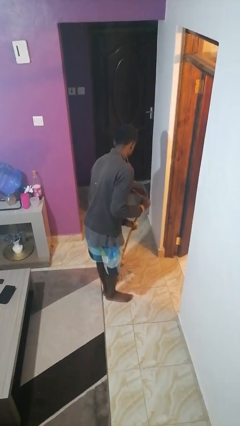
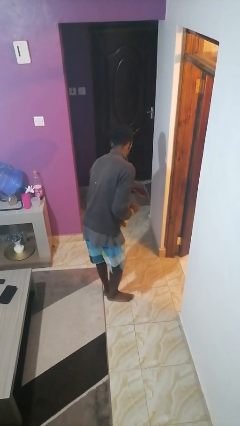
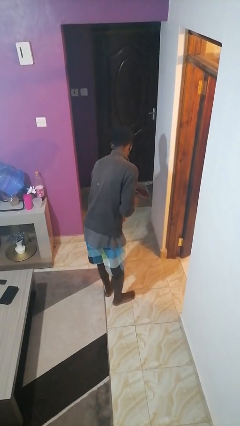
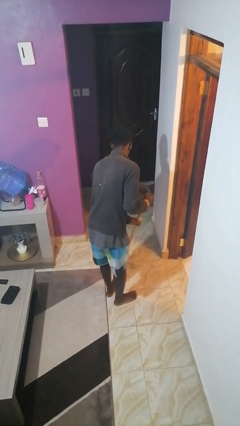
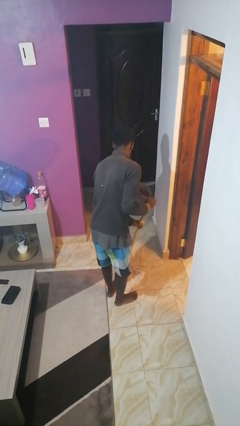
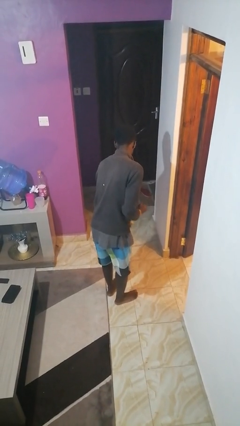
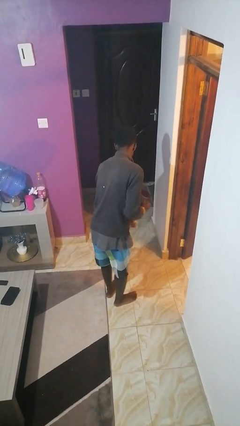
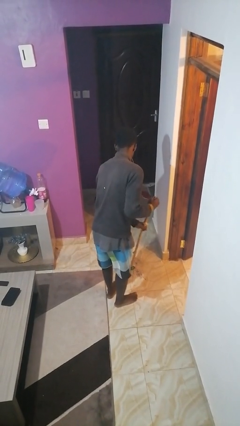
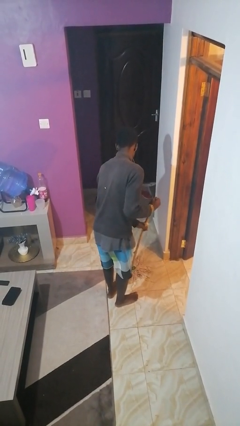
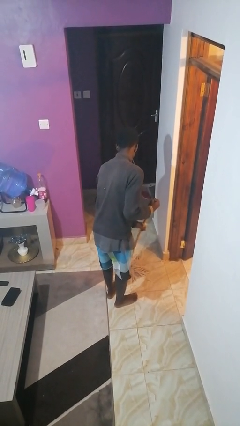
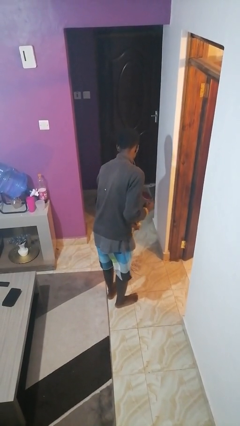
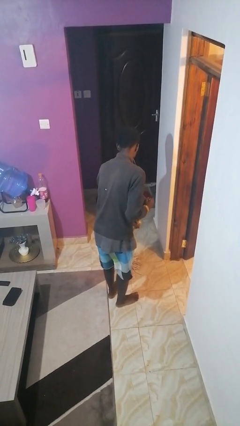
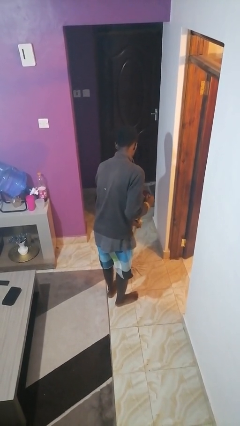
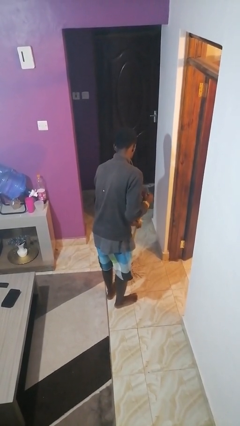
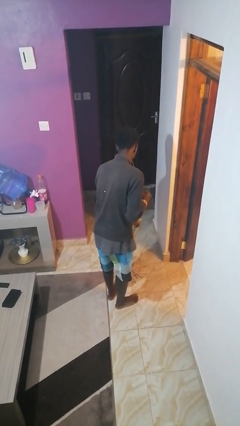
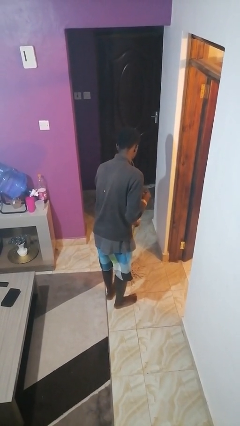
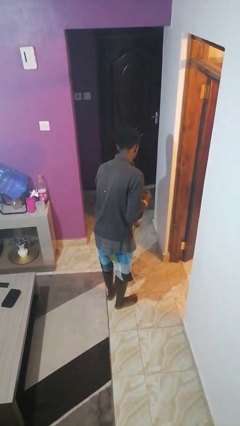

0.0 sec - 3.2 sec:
person mops

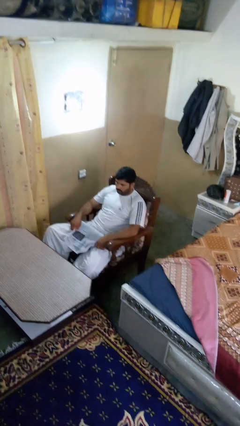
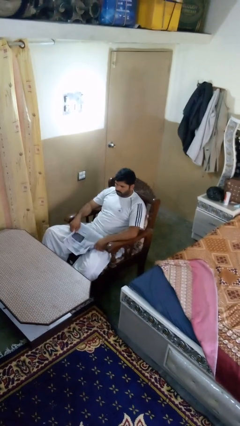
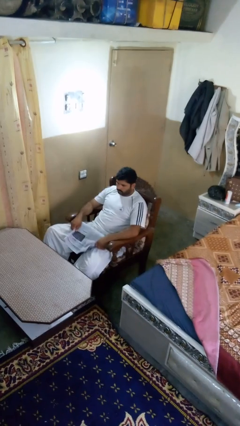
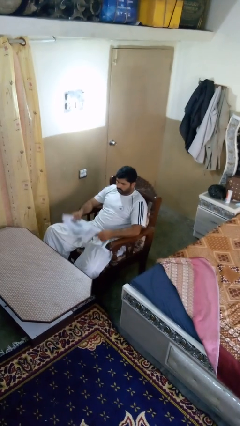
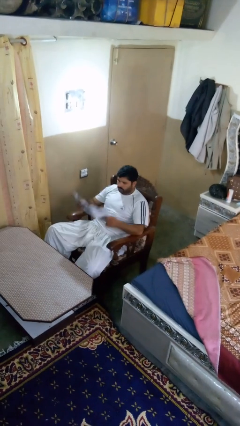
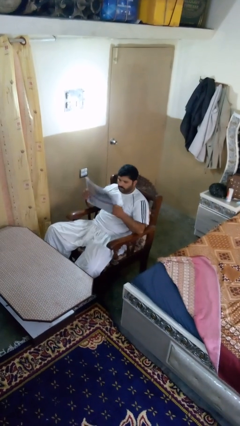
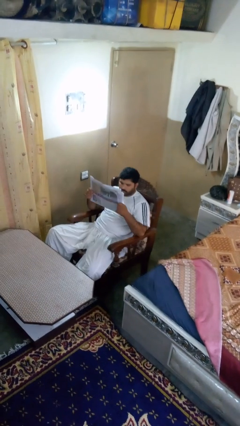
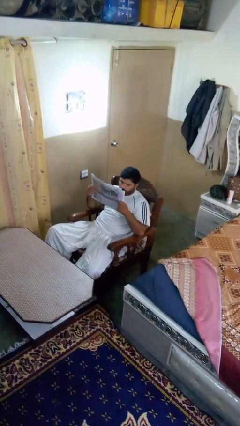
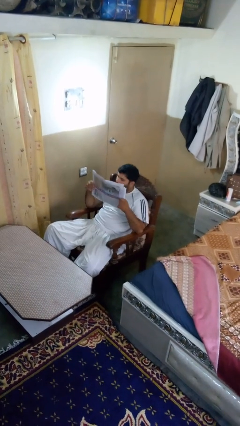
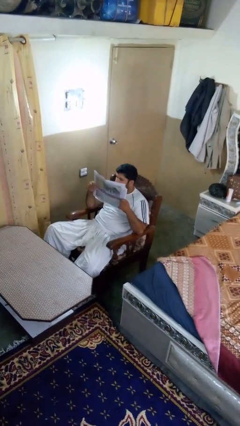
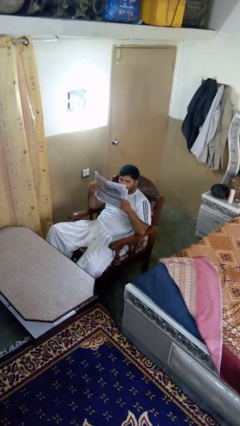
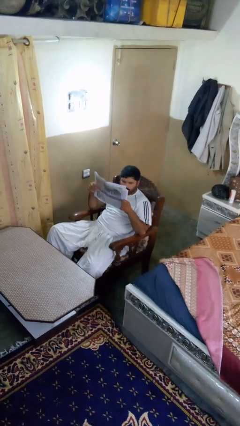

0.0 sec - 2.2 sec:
person reads newspaper

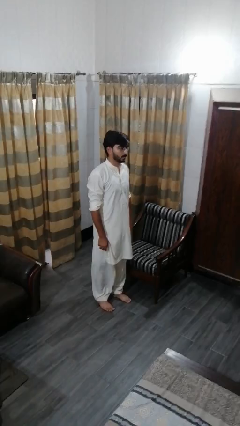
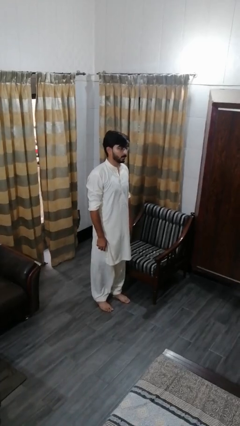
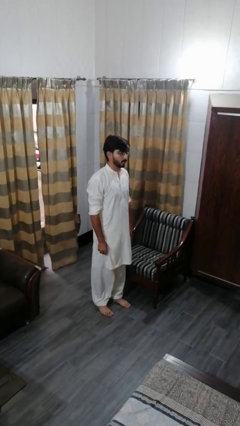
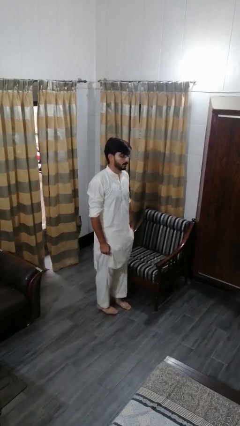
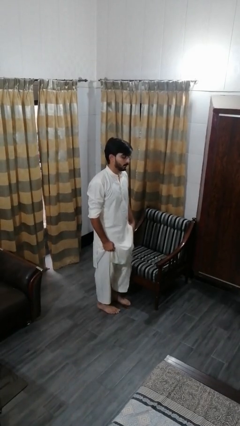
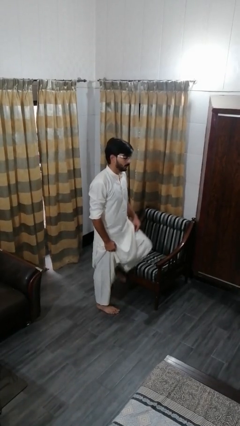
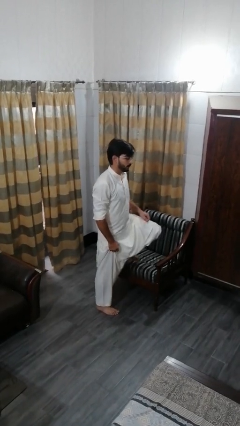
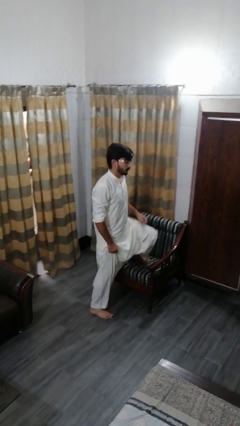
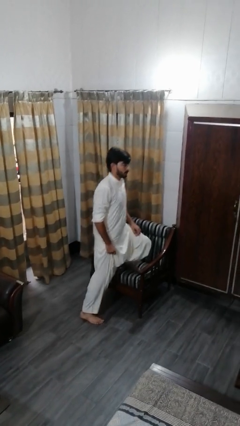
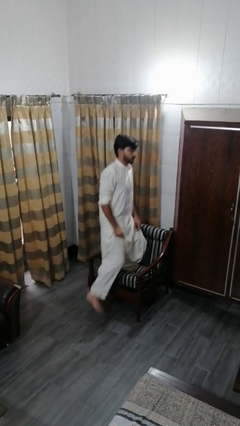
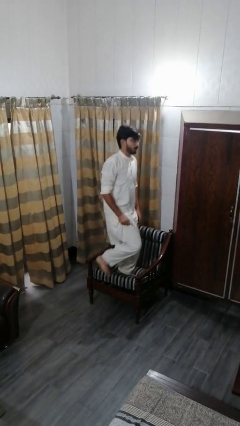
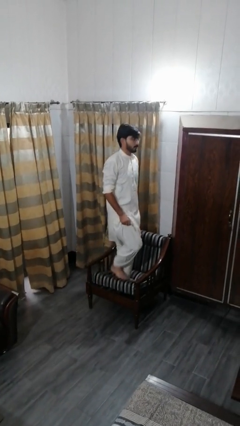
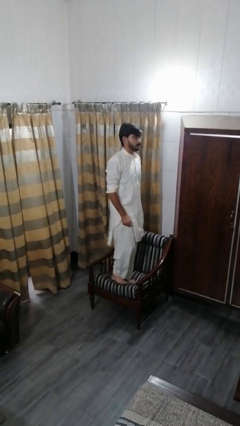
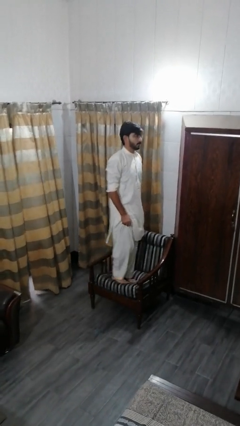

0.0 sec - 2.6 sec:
person climbs on chair

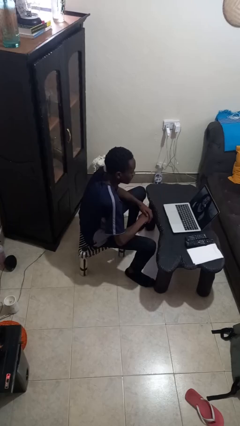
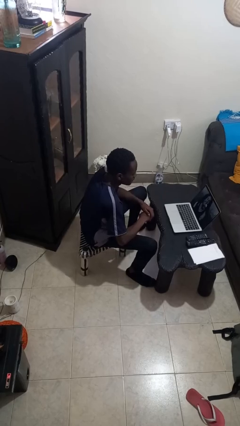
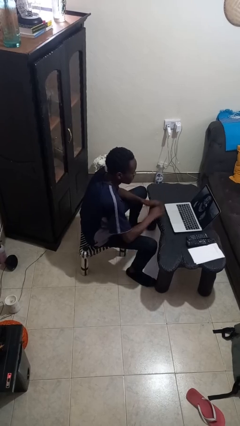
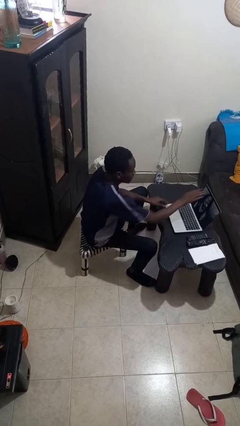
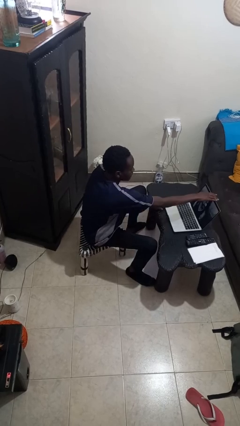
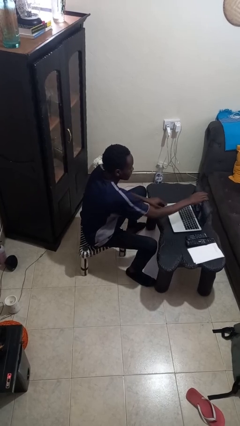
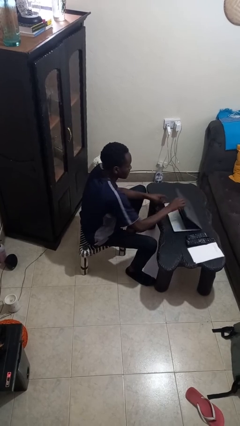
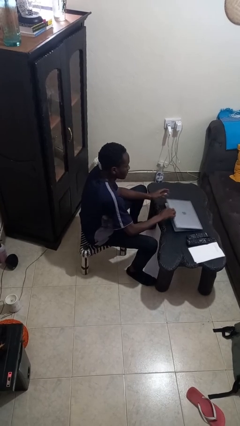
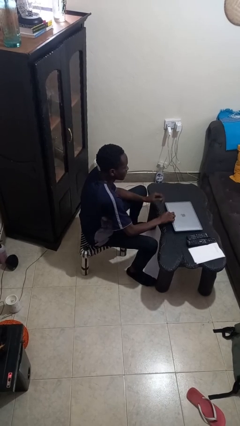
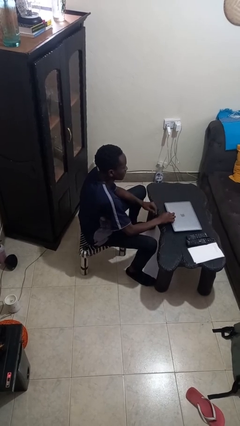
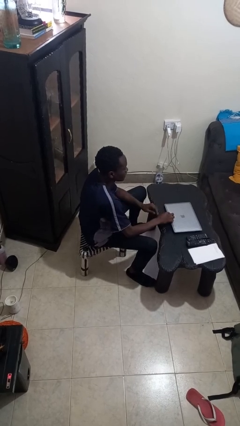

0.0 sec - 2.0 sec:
person closes laptop

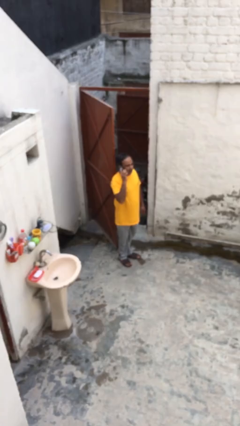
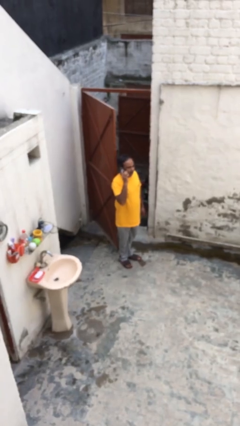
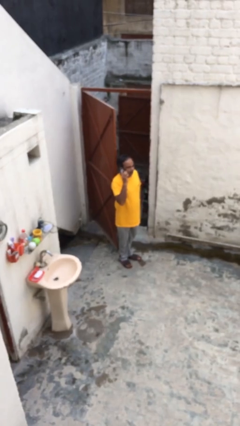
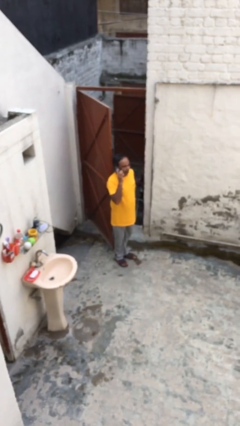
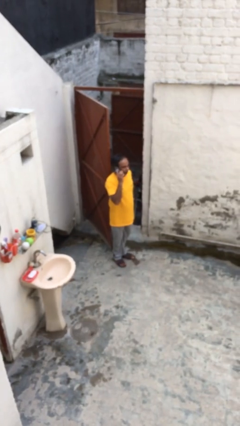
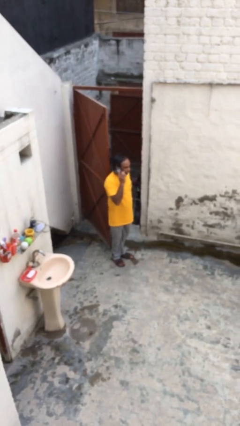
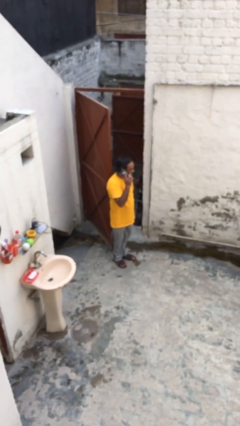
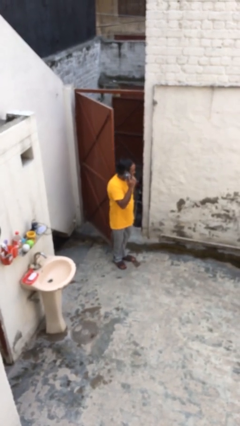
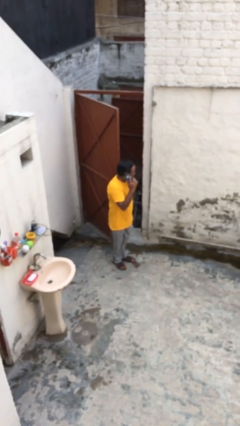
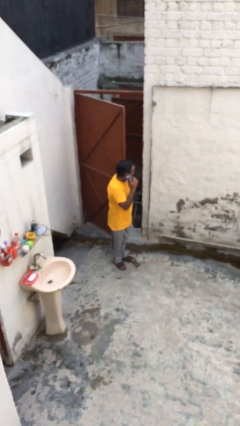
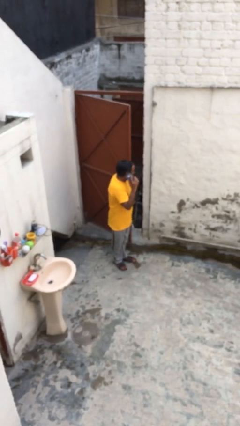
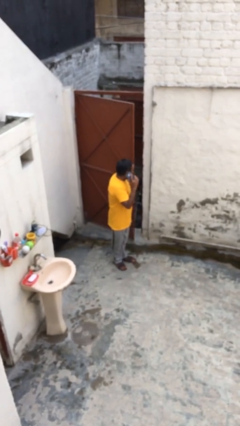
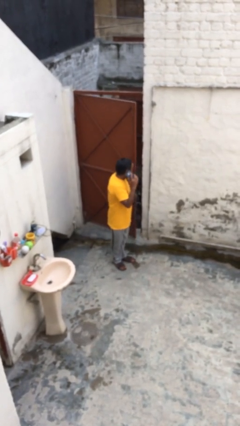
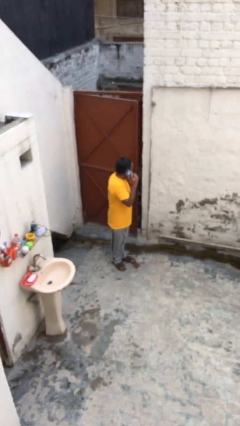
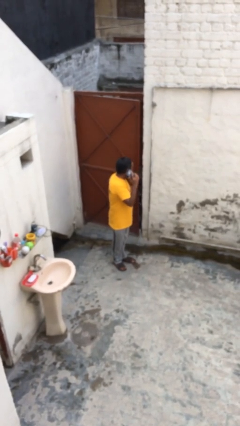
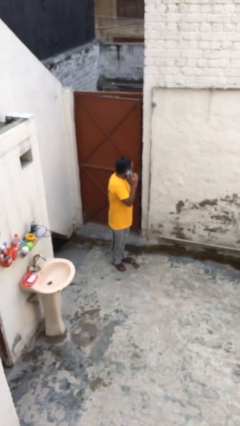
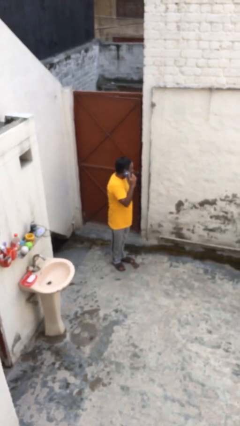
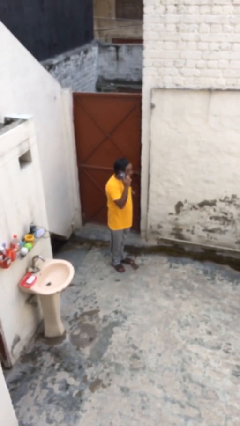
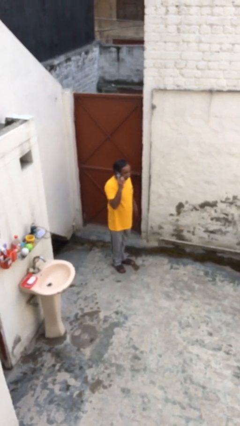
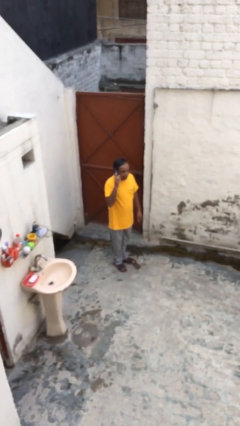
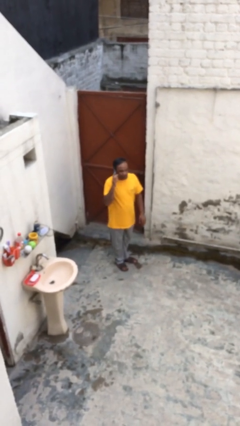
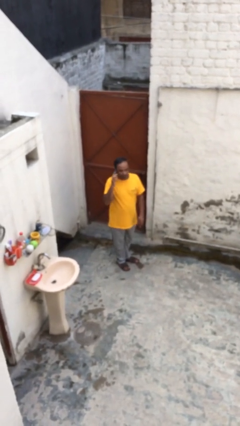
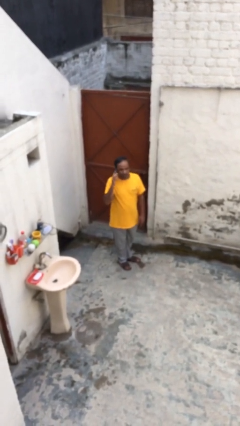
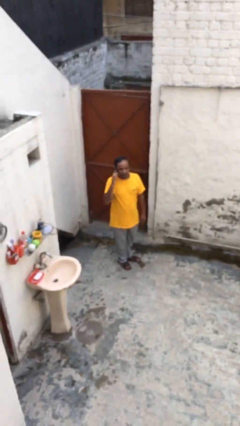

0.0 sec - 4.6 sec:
person closes facility door

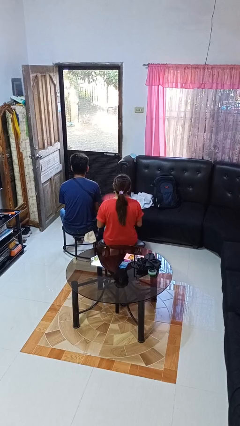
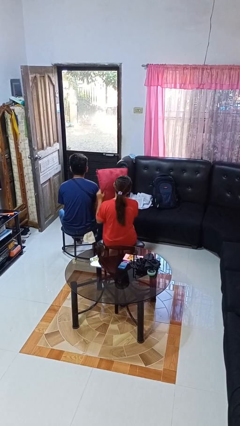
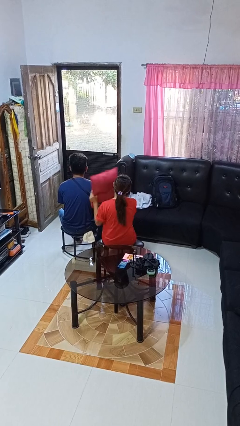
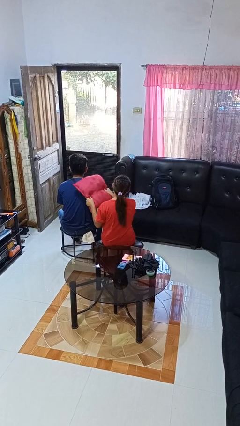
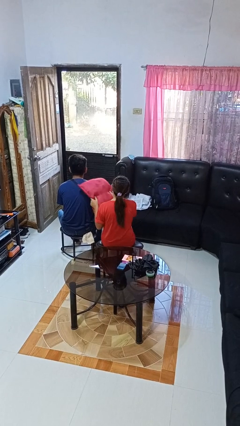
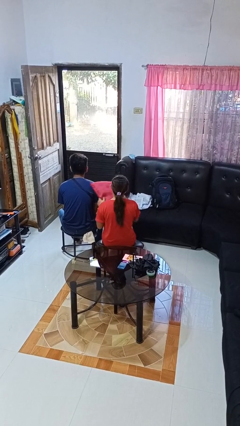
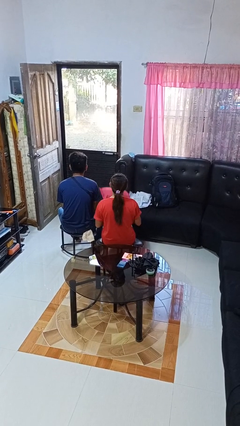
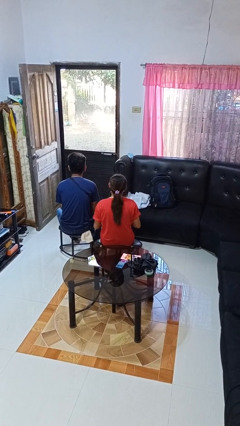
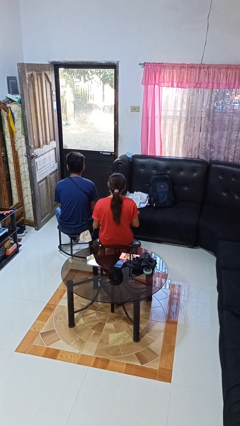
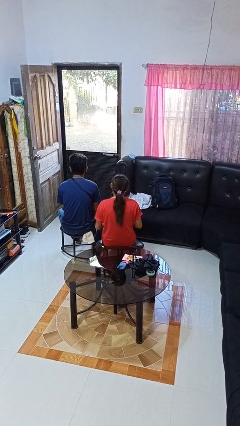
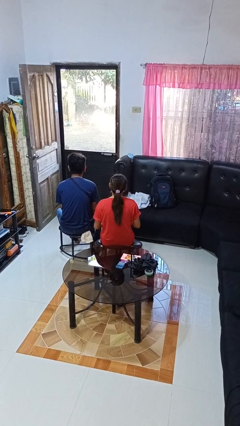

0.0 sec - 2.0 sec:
person hits person with pillow

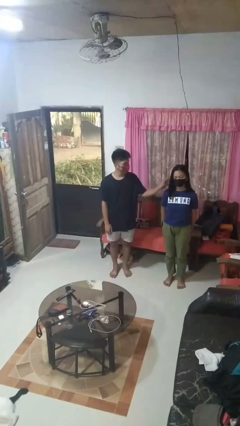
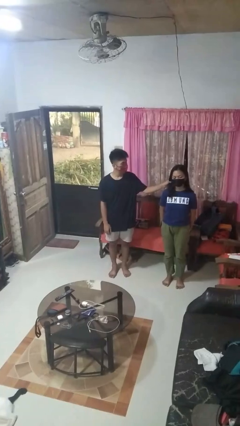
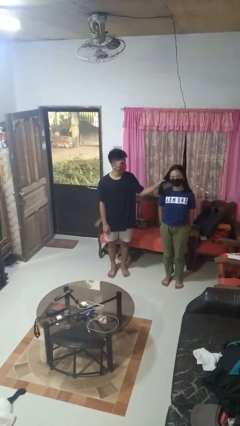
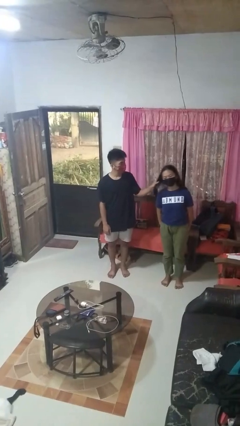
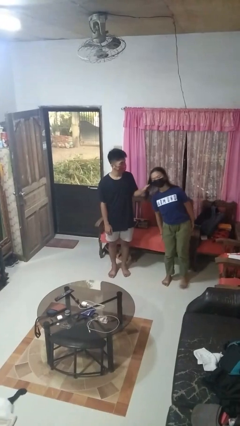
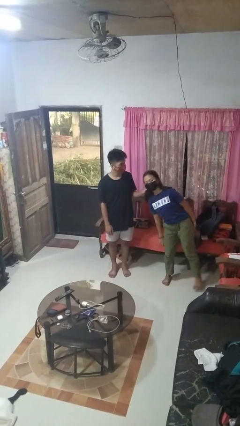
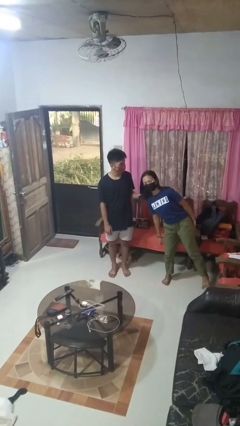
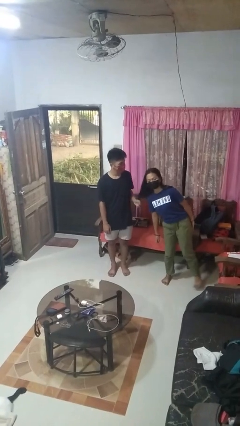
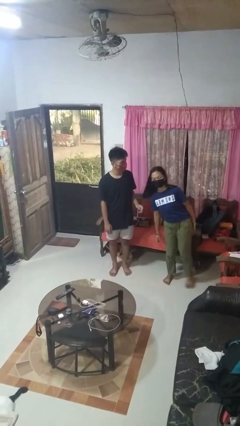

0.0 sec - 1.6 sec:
person grabs person by hair
